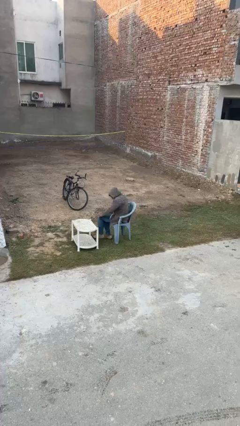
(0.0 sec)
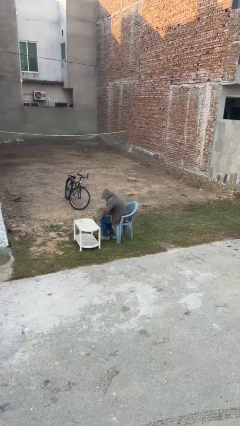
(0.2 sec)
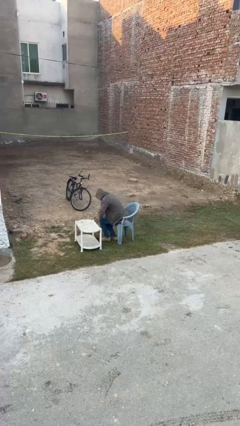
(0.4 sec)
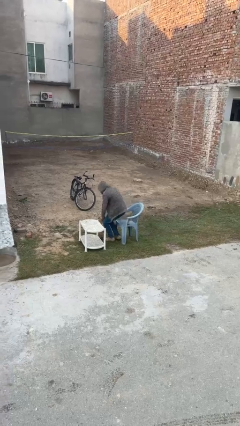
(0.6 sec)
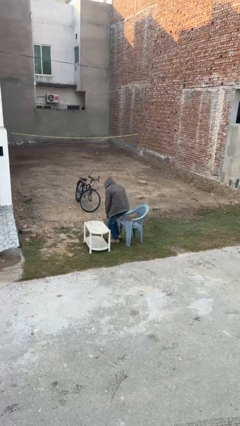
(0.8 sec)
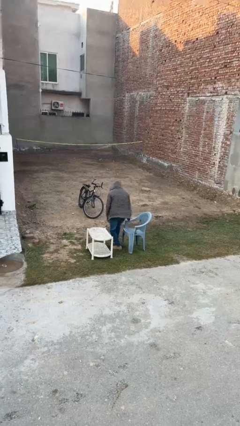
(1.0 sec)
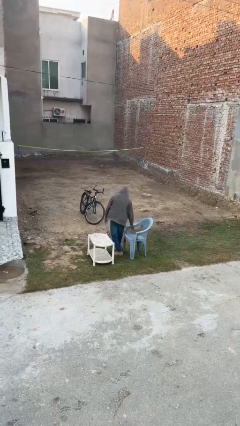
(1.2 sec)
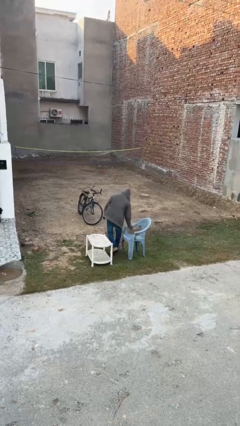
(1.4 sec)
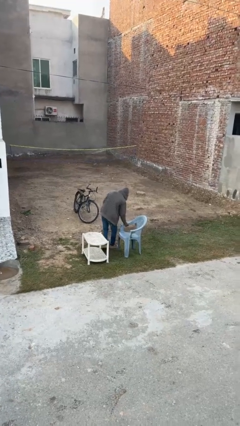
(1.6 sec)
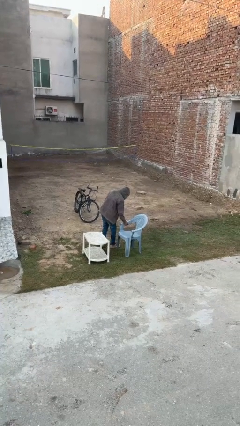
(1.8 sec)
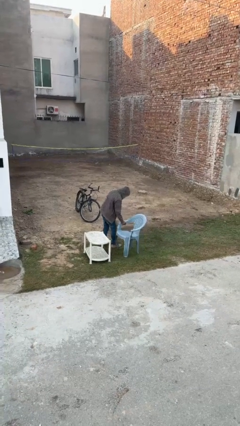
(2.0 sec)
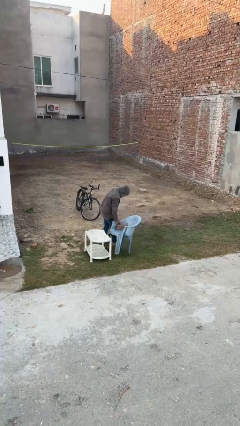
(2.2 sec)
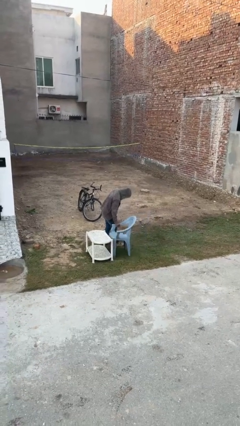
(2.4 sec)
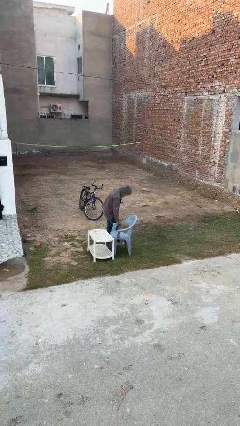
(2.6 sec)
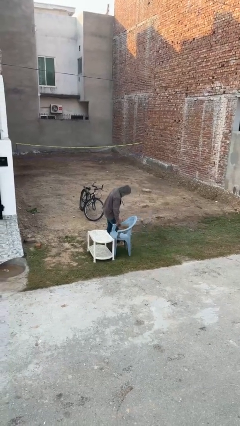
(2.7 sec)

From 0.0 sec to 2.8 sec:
person stands up

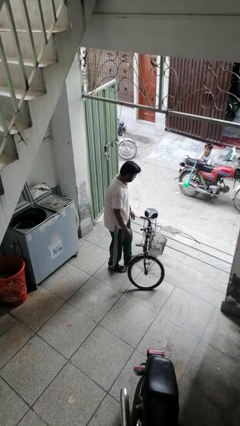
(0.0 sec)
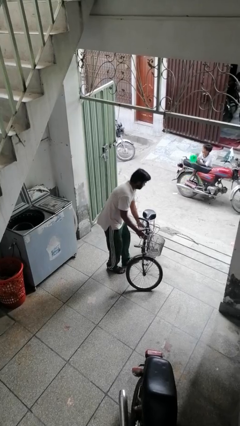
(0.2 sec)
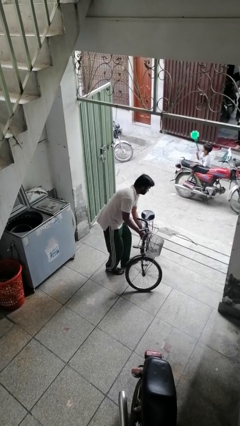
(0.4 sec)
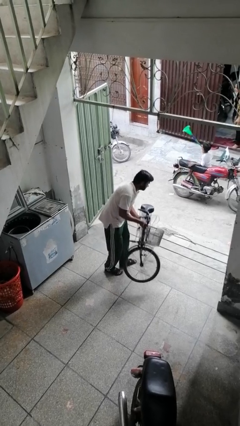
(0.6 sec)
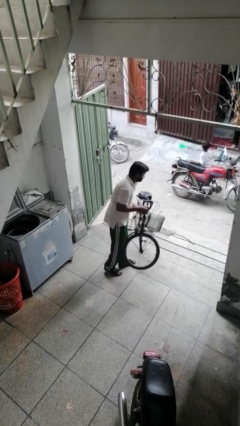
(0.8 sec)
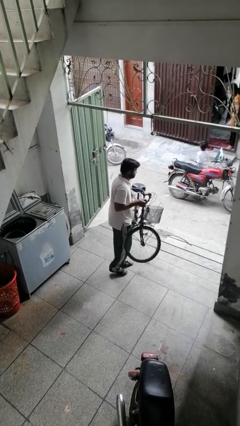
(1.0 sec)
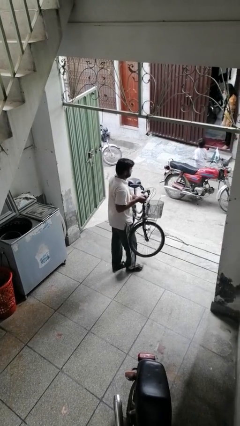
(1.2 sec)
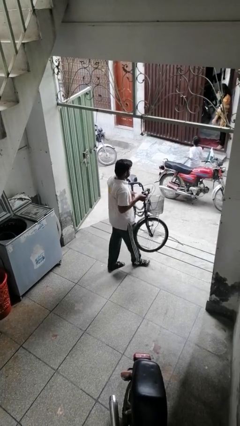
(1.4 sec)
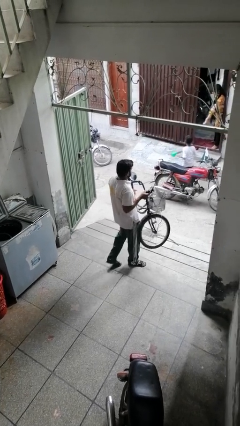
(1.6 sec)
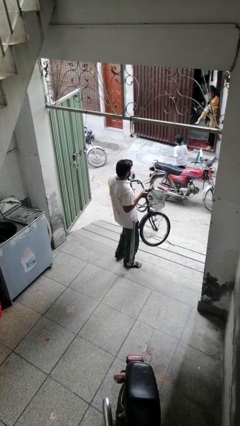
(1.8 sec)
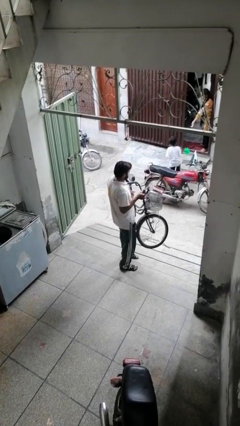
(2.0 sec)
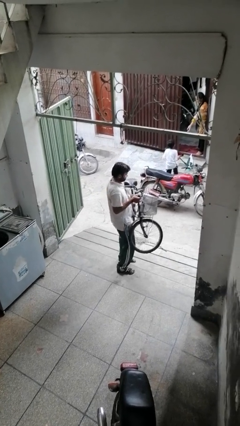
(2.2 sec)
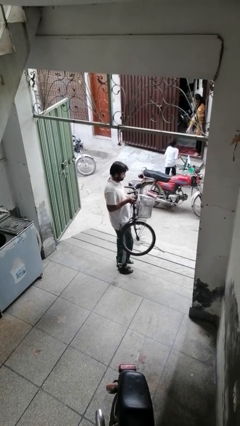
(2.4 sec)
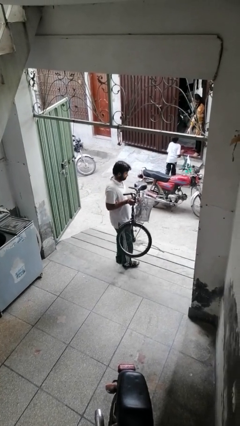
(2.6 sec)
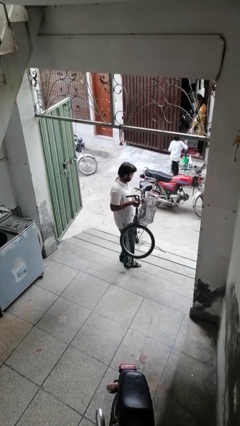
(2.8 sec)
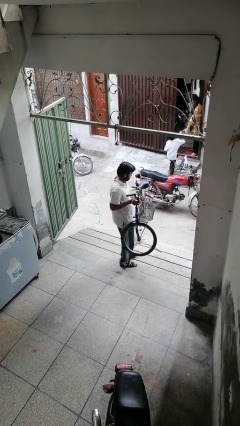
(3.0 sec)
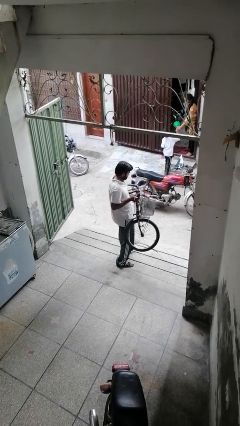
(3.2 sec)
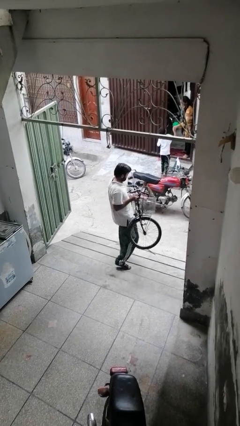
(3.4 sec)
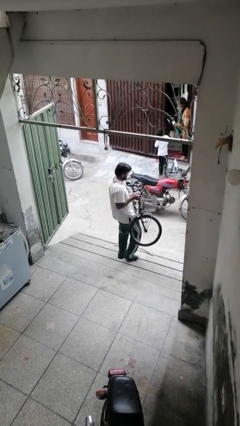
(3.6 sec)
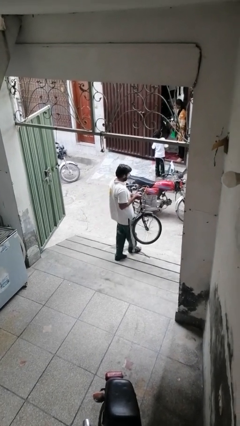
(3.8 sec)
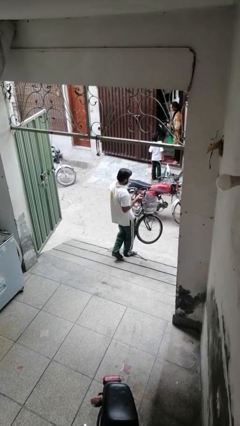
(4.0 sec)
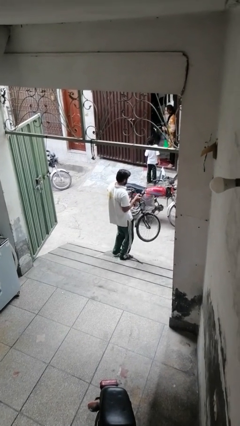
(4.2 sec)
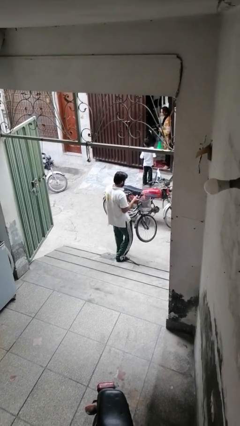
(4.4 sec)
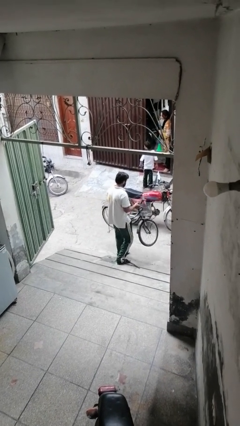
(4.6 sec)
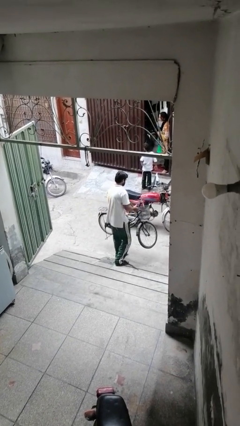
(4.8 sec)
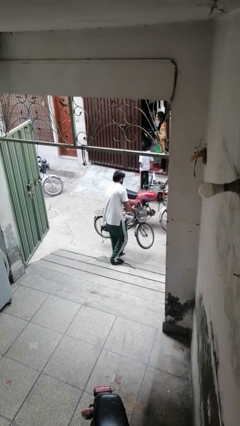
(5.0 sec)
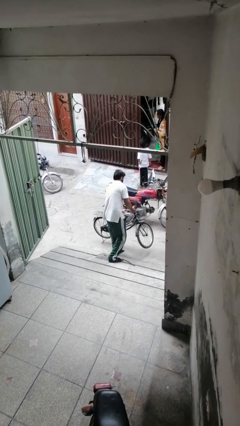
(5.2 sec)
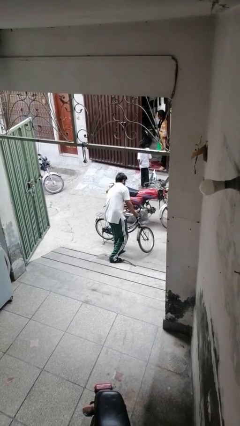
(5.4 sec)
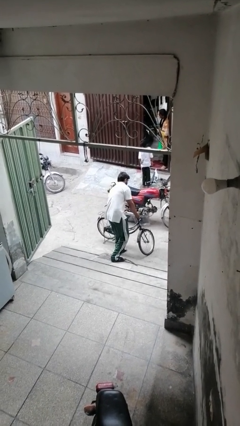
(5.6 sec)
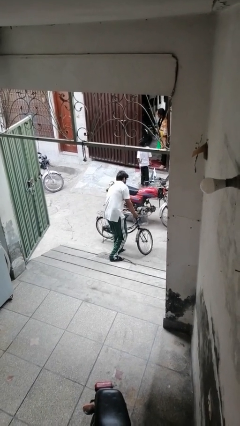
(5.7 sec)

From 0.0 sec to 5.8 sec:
person carries bicycle

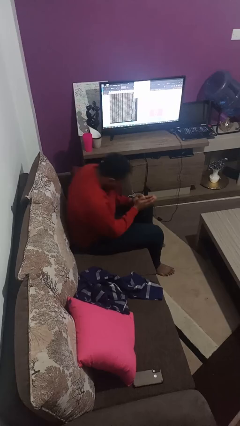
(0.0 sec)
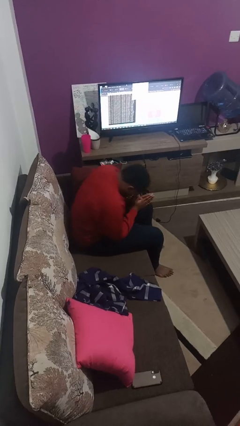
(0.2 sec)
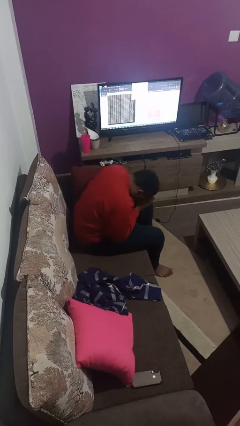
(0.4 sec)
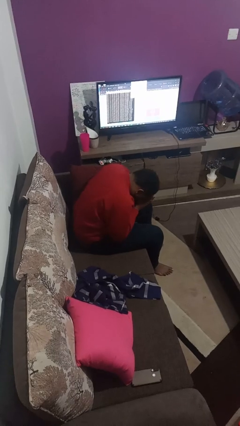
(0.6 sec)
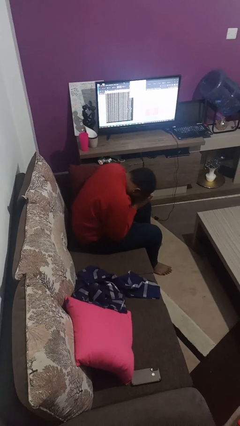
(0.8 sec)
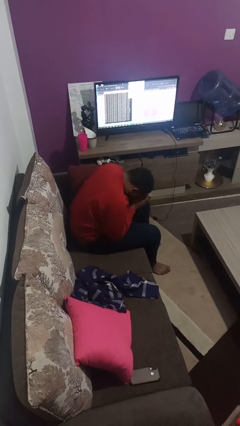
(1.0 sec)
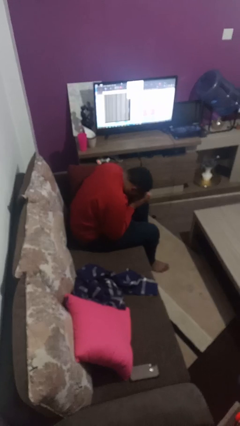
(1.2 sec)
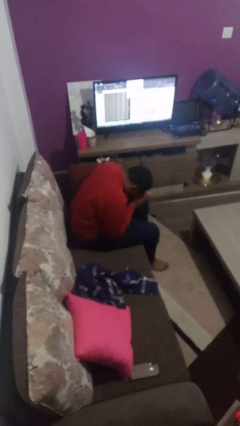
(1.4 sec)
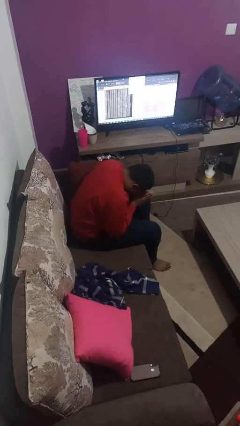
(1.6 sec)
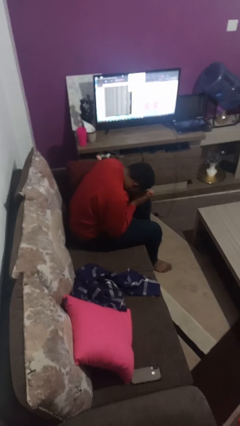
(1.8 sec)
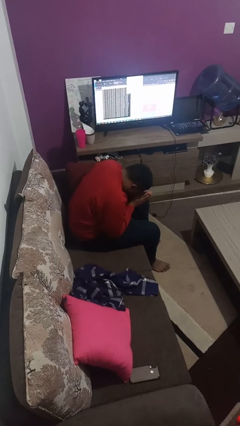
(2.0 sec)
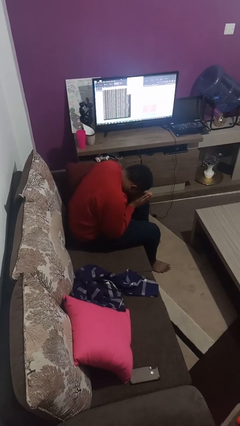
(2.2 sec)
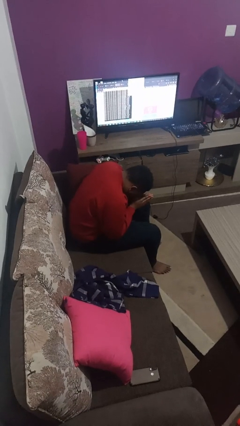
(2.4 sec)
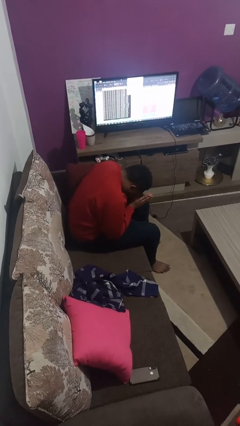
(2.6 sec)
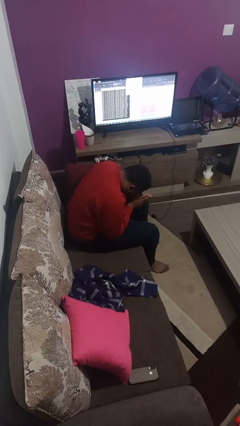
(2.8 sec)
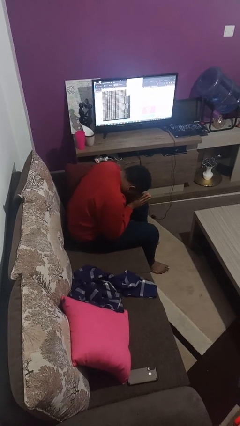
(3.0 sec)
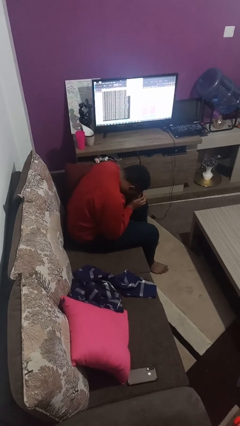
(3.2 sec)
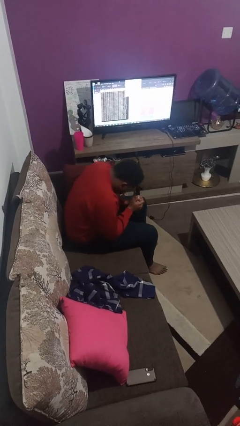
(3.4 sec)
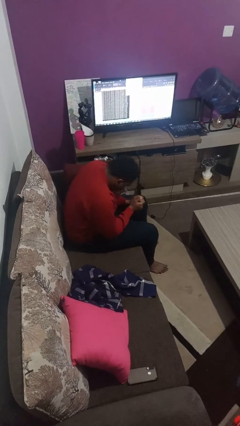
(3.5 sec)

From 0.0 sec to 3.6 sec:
person prays

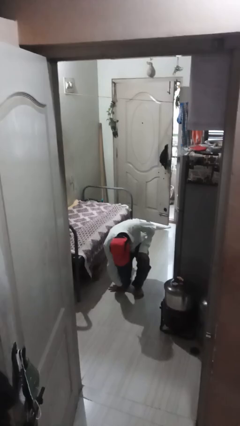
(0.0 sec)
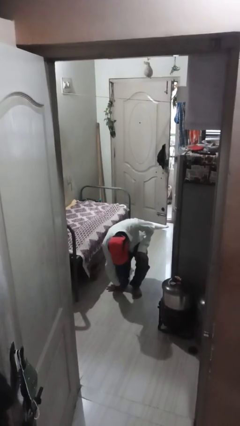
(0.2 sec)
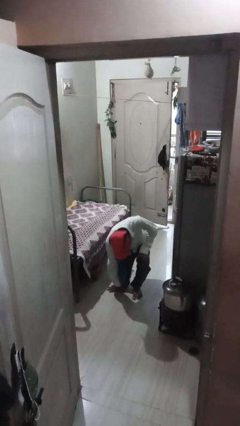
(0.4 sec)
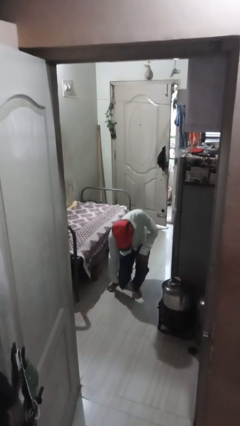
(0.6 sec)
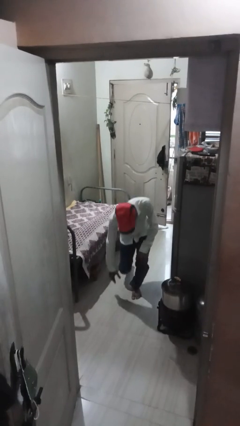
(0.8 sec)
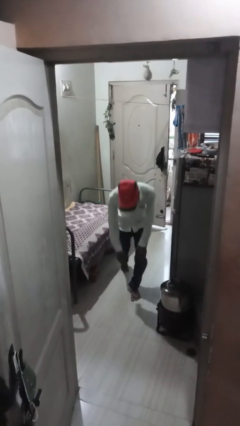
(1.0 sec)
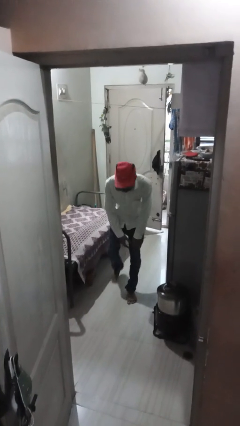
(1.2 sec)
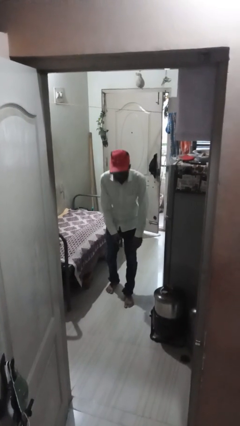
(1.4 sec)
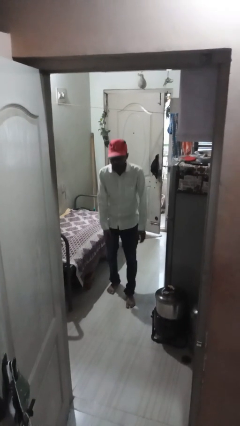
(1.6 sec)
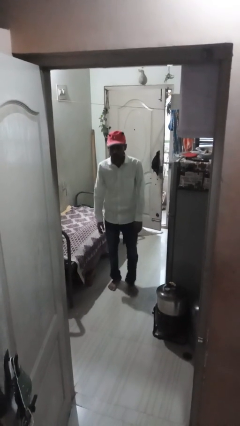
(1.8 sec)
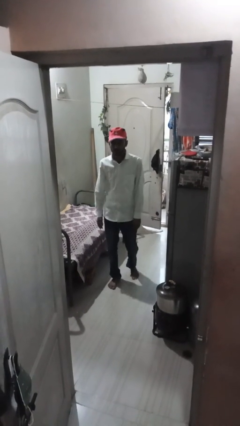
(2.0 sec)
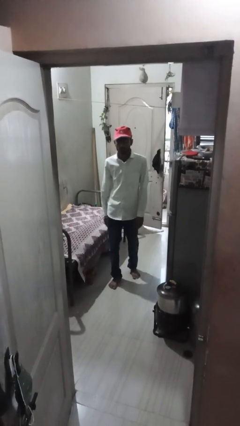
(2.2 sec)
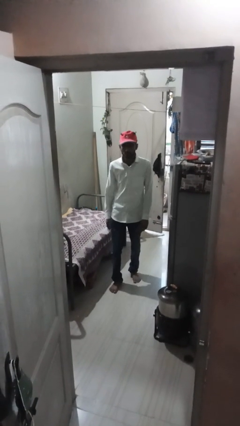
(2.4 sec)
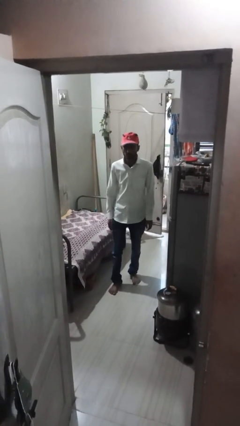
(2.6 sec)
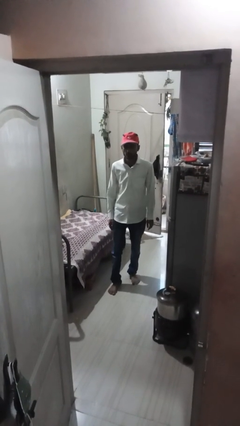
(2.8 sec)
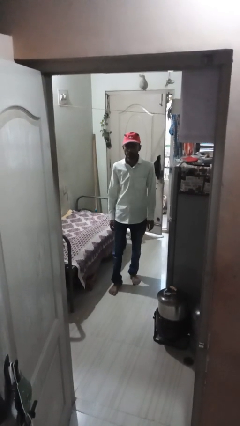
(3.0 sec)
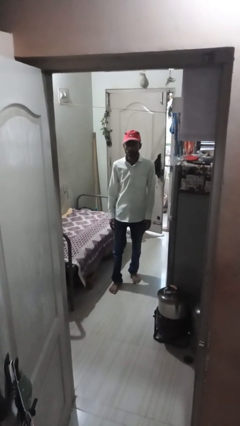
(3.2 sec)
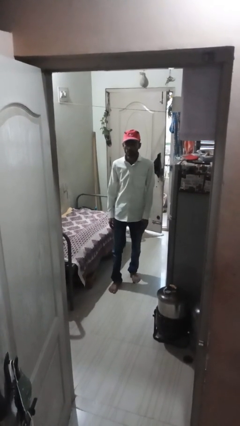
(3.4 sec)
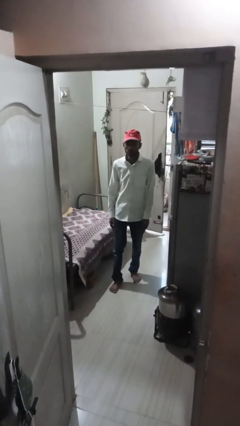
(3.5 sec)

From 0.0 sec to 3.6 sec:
person stands up from floor

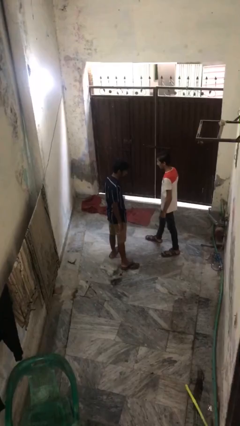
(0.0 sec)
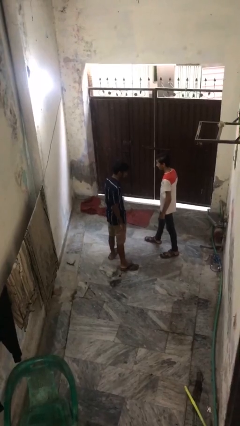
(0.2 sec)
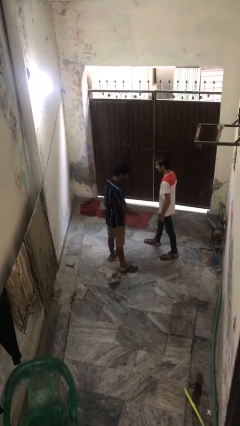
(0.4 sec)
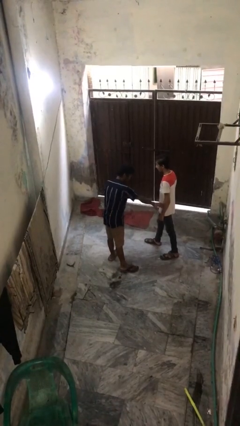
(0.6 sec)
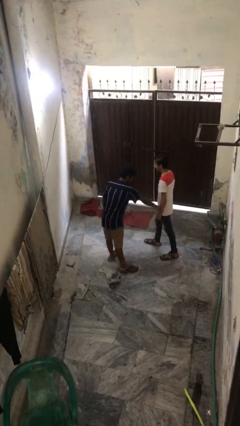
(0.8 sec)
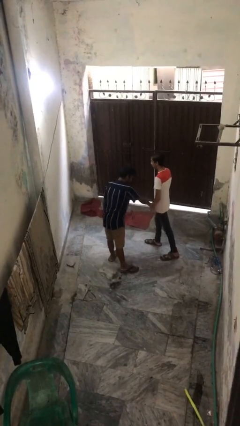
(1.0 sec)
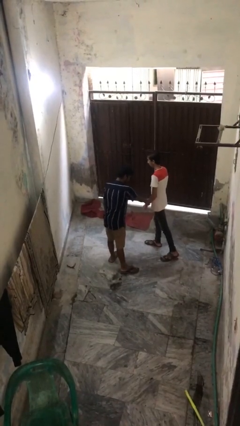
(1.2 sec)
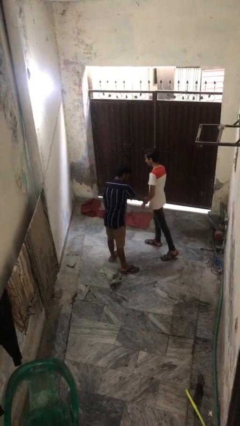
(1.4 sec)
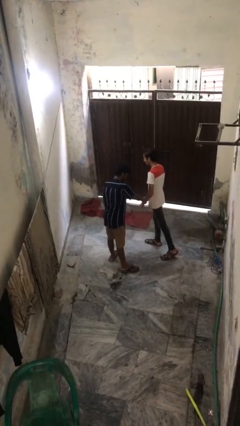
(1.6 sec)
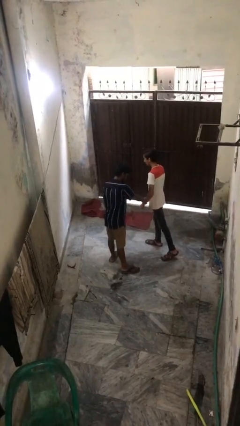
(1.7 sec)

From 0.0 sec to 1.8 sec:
person grabs person by forearm
